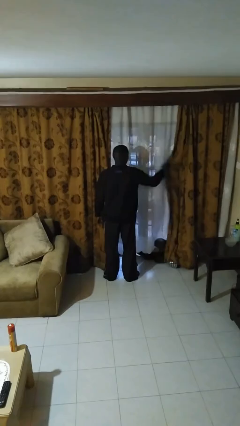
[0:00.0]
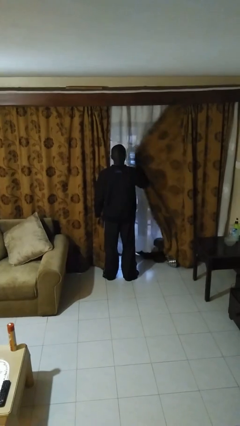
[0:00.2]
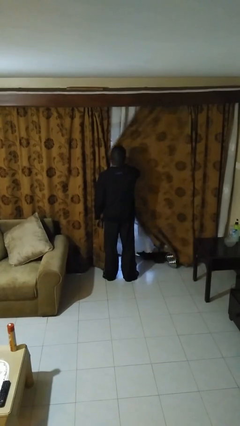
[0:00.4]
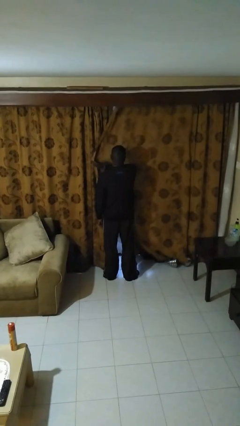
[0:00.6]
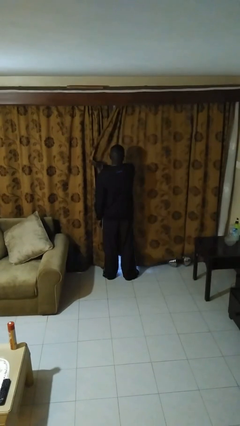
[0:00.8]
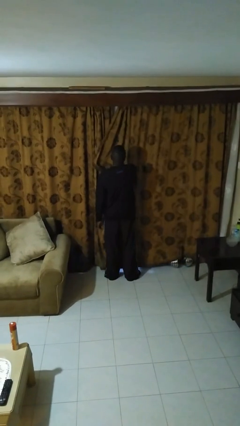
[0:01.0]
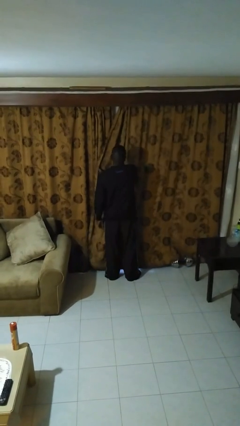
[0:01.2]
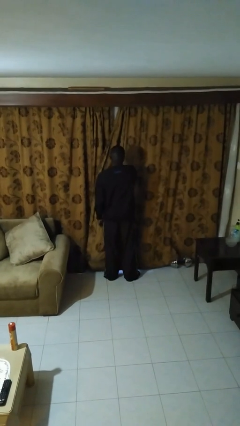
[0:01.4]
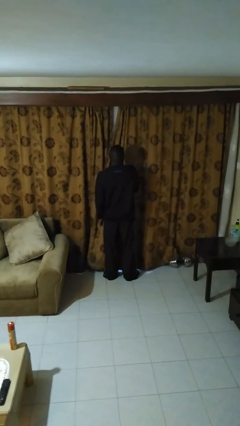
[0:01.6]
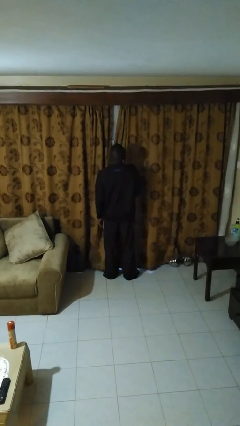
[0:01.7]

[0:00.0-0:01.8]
person closes curtains

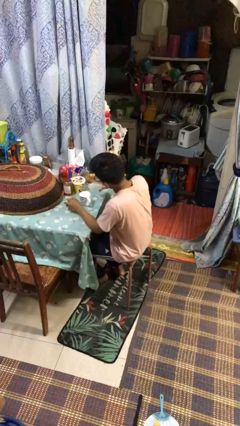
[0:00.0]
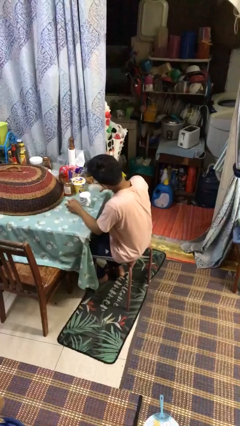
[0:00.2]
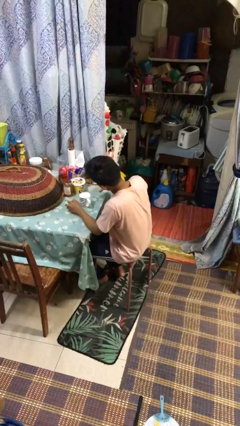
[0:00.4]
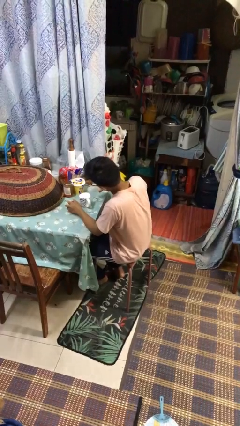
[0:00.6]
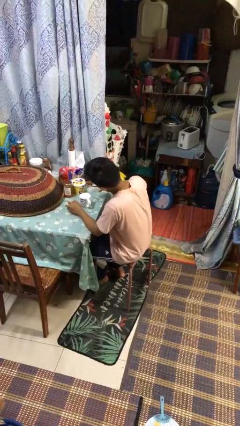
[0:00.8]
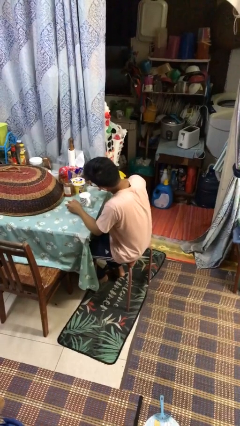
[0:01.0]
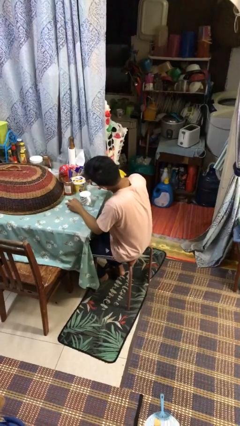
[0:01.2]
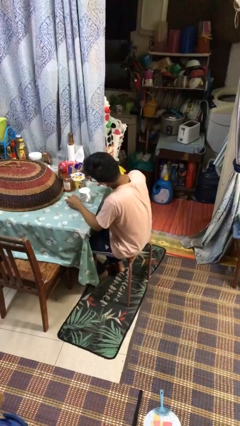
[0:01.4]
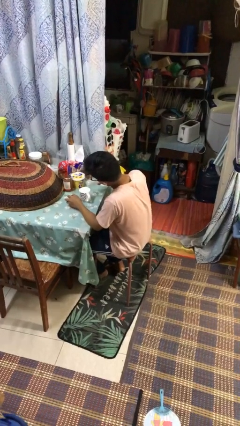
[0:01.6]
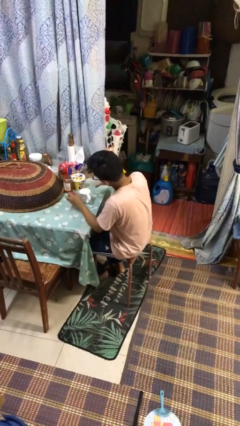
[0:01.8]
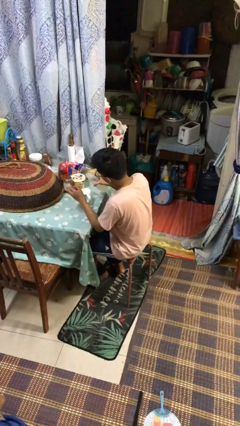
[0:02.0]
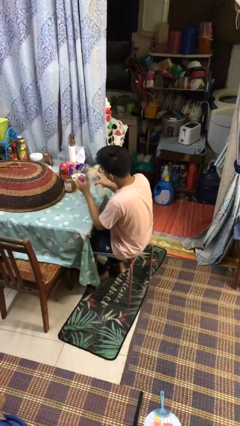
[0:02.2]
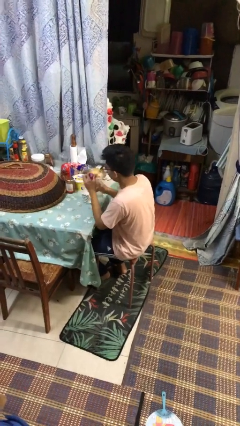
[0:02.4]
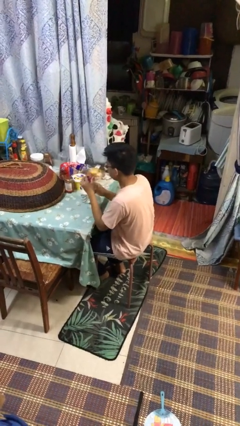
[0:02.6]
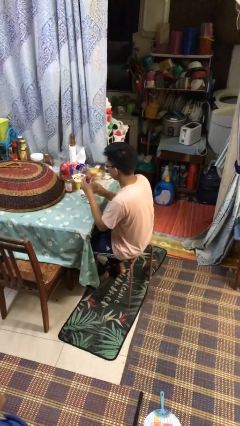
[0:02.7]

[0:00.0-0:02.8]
person pours liquid into cup

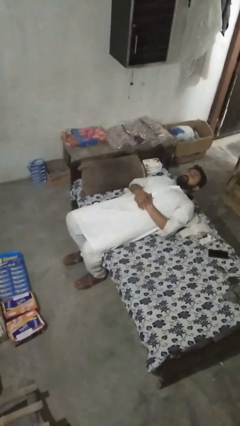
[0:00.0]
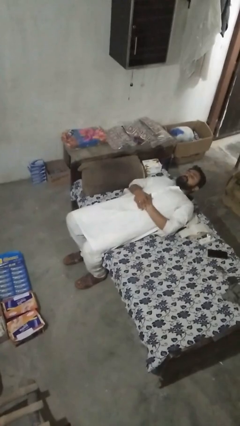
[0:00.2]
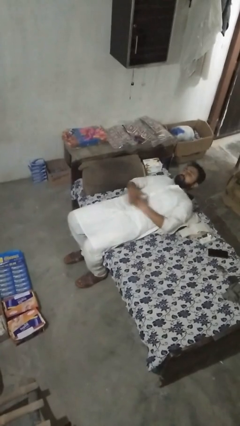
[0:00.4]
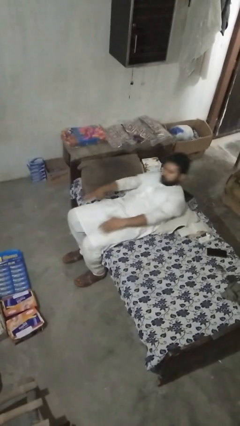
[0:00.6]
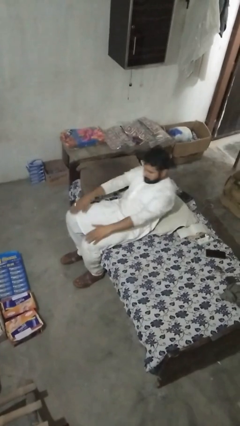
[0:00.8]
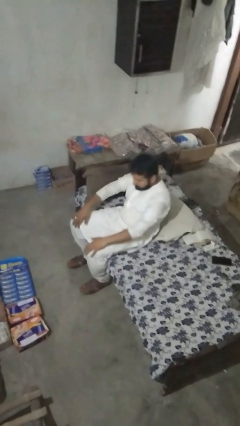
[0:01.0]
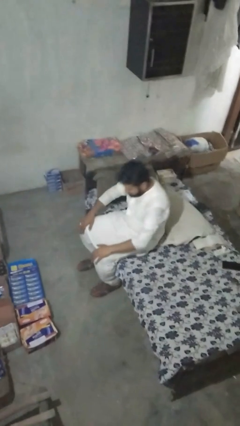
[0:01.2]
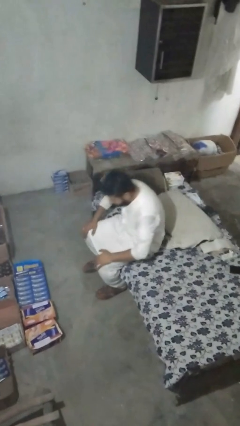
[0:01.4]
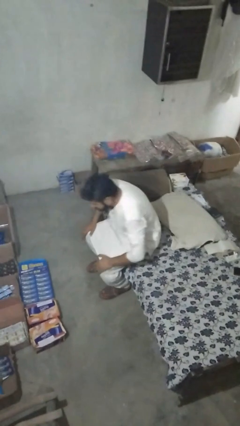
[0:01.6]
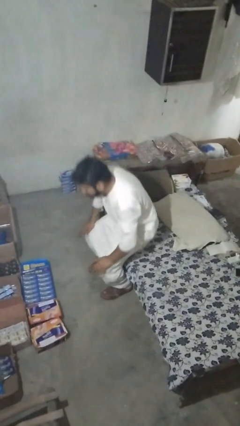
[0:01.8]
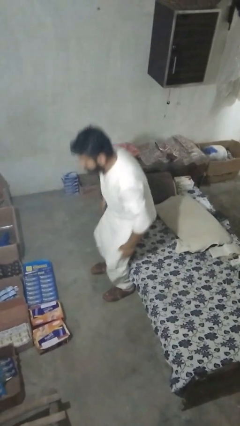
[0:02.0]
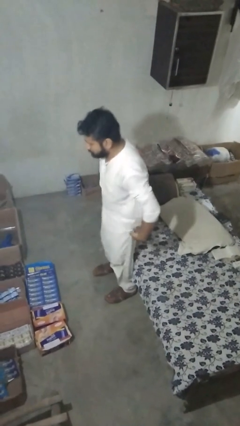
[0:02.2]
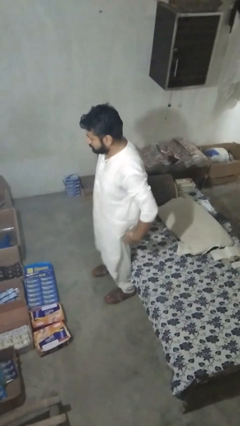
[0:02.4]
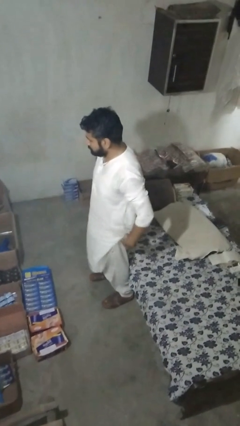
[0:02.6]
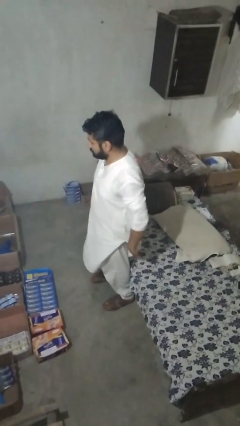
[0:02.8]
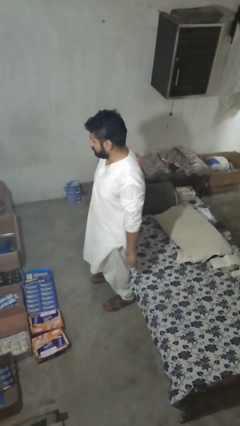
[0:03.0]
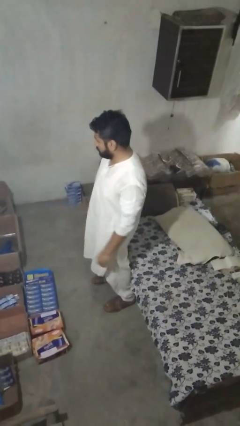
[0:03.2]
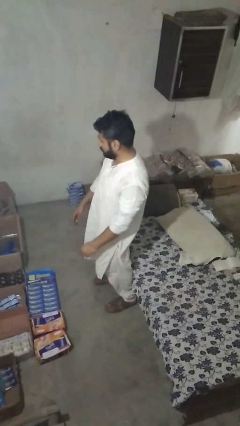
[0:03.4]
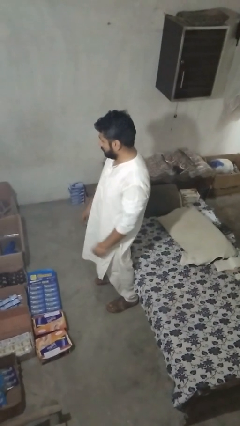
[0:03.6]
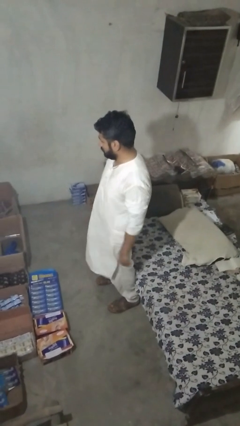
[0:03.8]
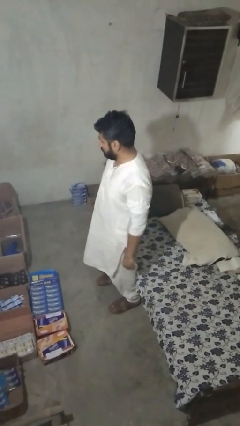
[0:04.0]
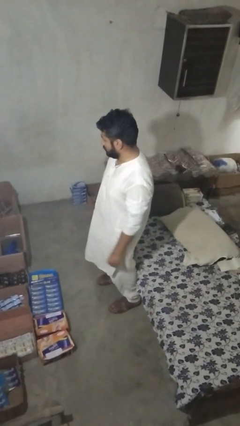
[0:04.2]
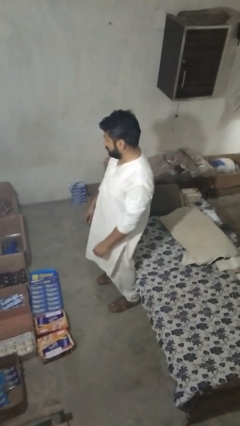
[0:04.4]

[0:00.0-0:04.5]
person stands up

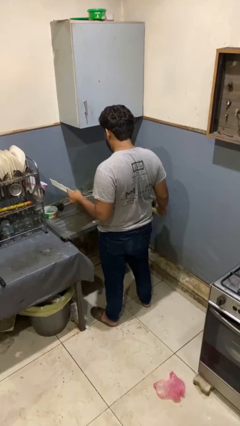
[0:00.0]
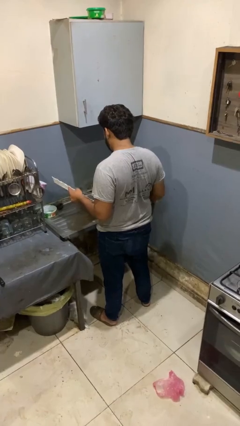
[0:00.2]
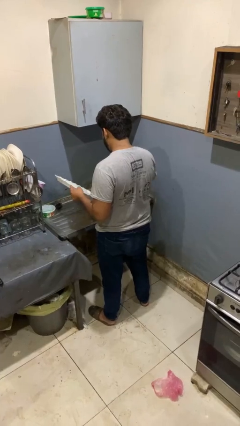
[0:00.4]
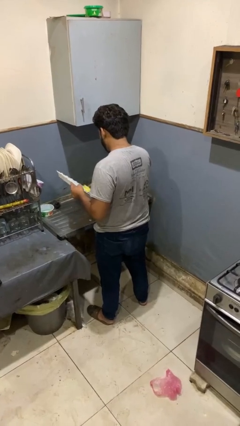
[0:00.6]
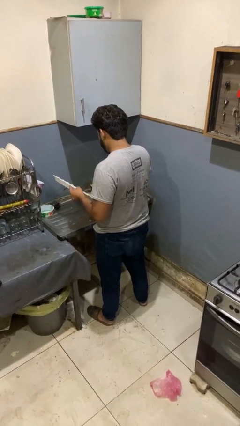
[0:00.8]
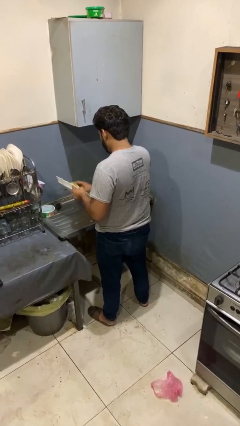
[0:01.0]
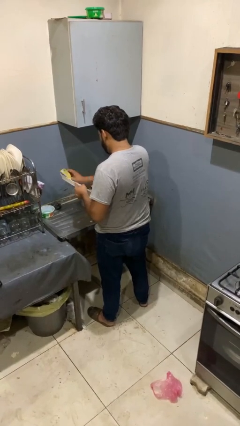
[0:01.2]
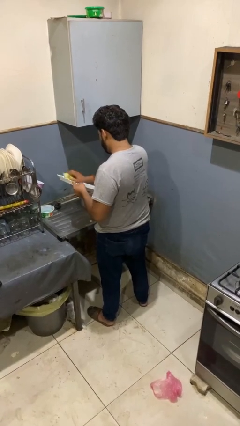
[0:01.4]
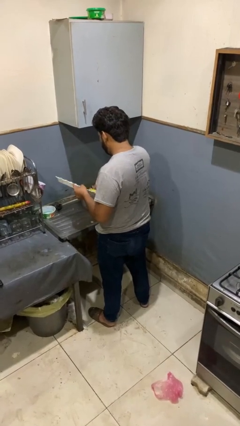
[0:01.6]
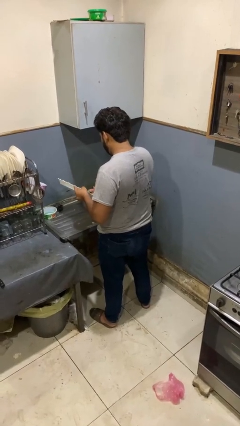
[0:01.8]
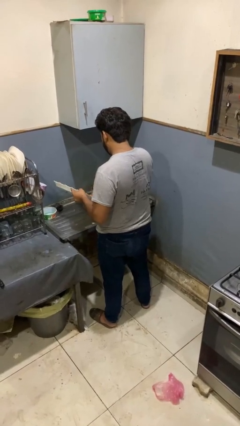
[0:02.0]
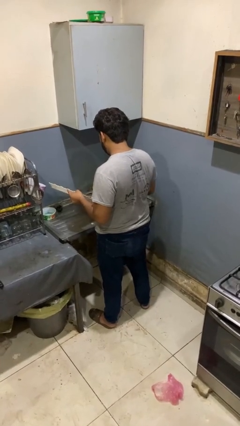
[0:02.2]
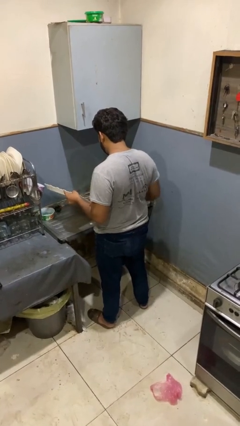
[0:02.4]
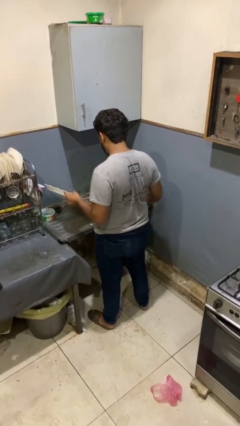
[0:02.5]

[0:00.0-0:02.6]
person washes dish

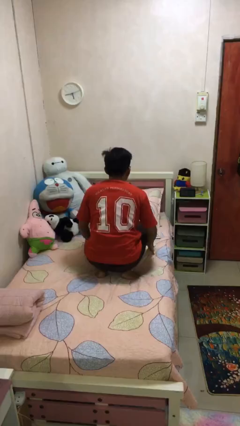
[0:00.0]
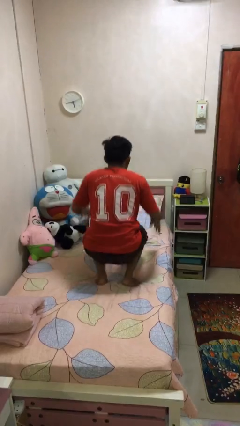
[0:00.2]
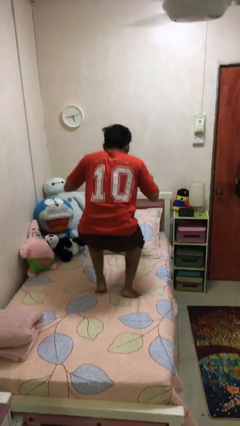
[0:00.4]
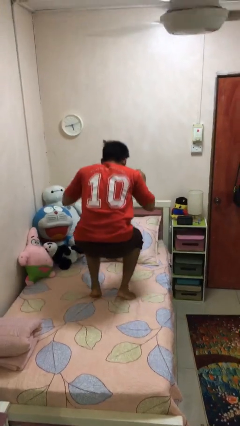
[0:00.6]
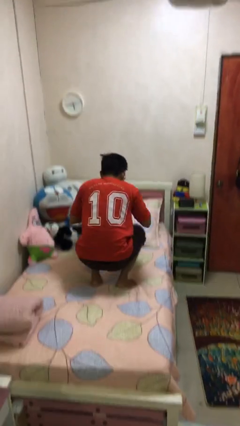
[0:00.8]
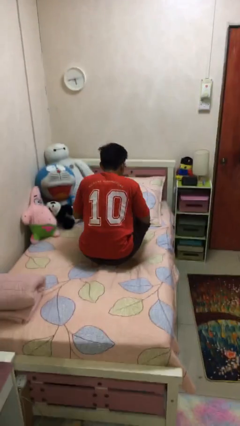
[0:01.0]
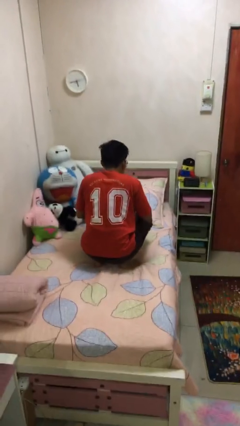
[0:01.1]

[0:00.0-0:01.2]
person jumps on bed

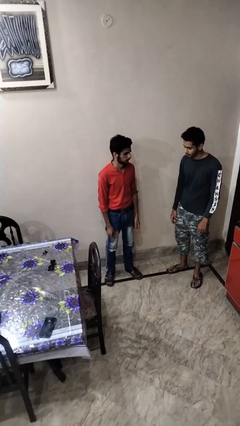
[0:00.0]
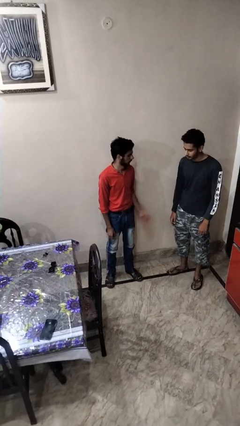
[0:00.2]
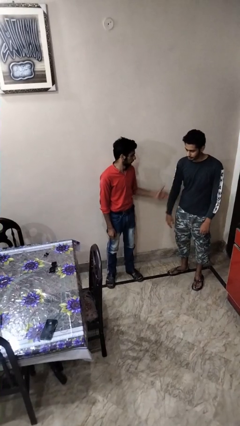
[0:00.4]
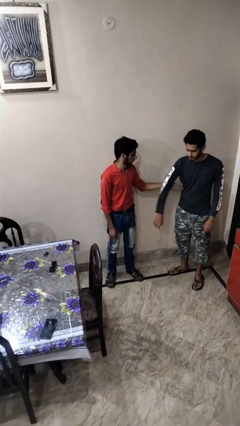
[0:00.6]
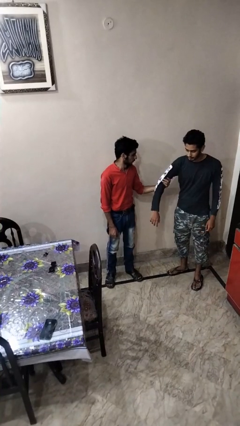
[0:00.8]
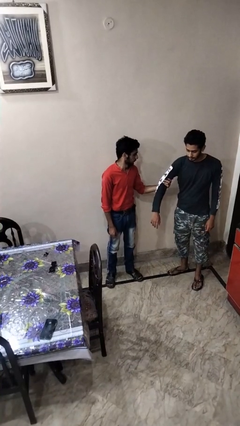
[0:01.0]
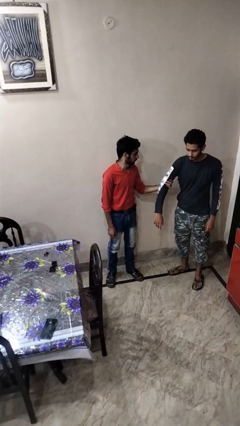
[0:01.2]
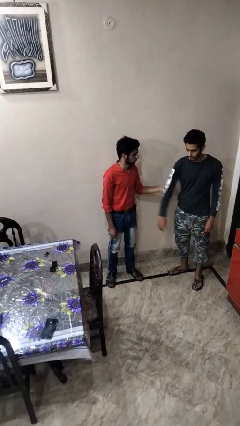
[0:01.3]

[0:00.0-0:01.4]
person grabs person by bicep

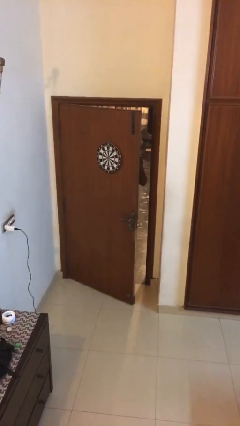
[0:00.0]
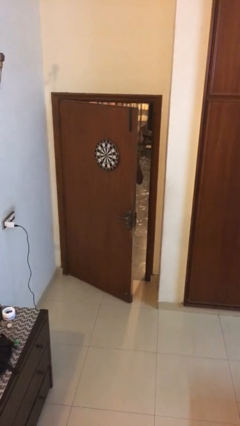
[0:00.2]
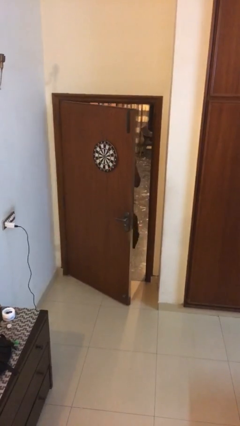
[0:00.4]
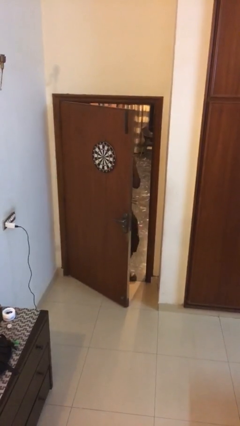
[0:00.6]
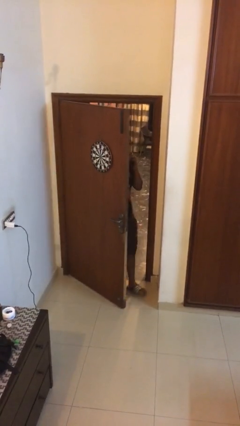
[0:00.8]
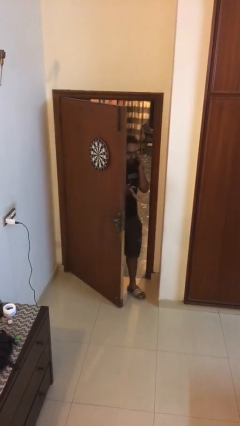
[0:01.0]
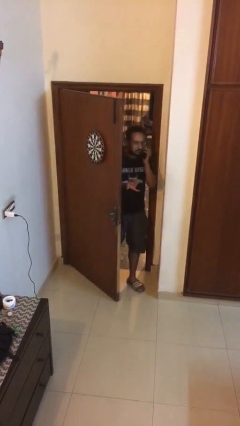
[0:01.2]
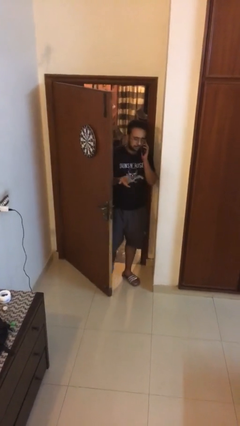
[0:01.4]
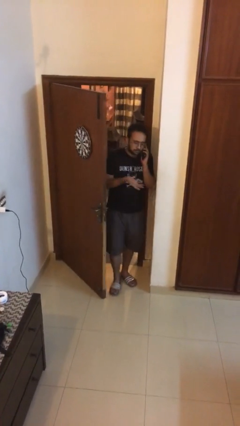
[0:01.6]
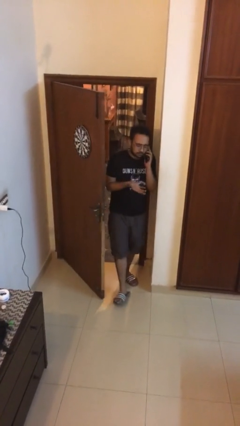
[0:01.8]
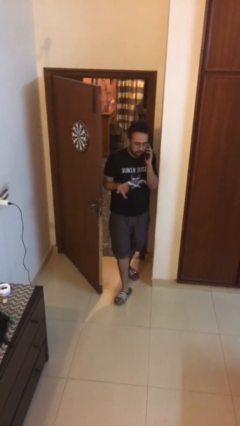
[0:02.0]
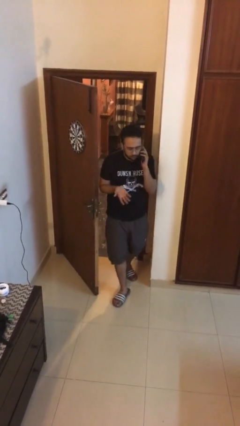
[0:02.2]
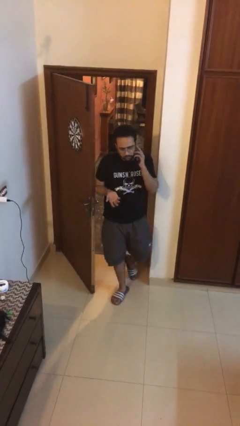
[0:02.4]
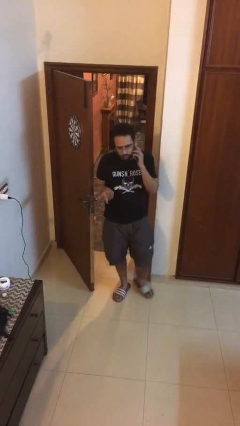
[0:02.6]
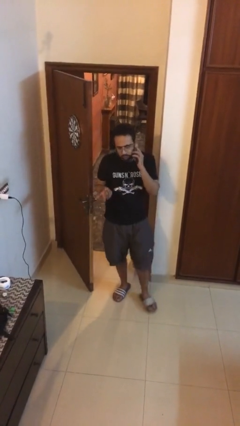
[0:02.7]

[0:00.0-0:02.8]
person enters scene through structure
